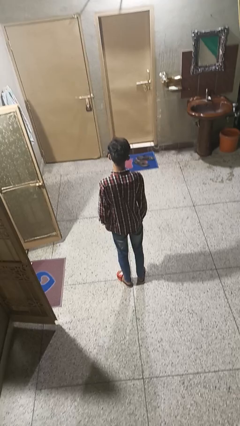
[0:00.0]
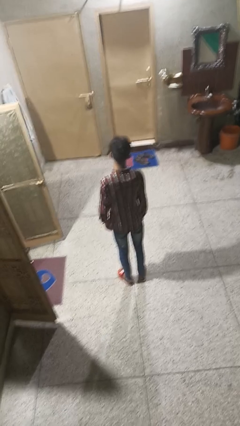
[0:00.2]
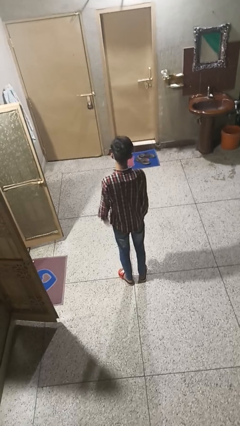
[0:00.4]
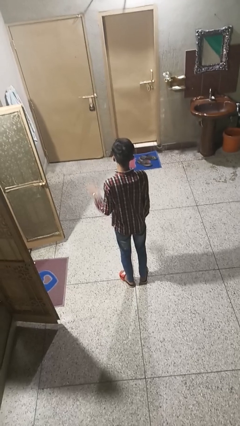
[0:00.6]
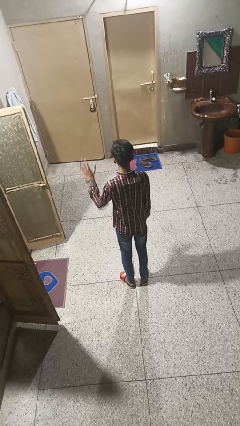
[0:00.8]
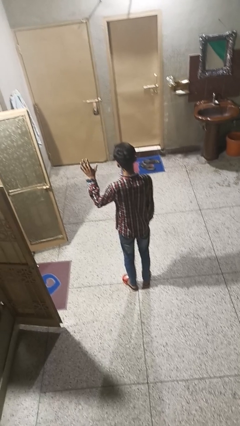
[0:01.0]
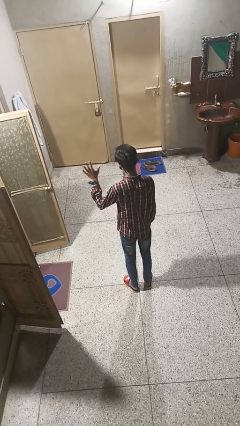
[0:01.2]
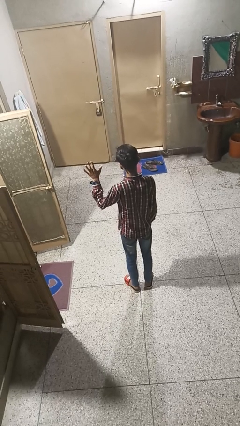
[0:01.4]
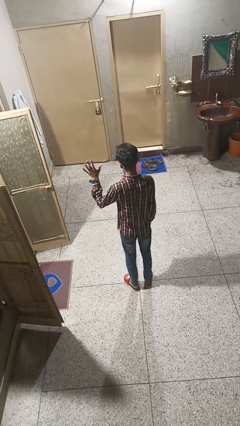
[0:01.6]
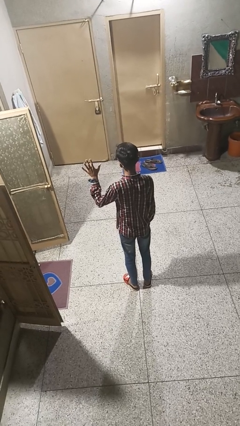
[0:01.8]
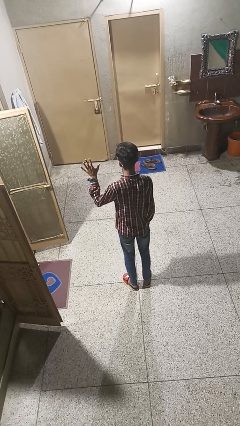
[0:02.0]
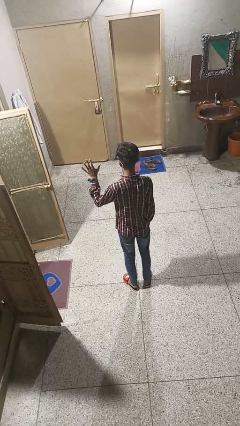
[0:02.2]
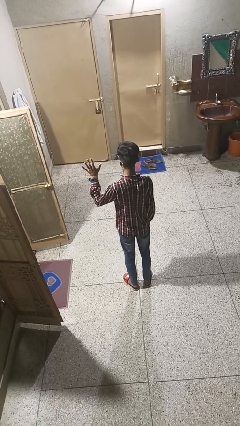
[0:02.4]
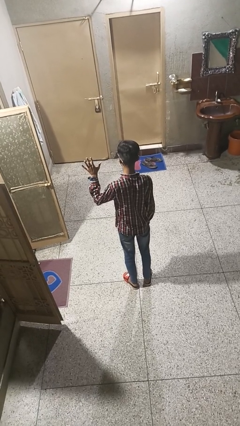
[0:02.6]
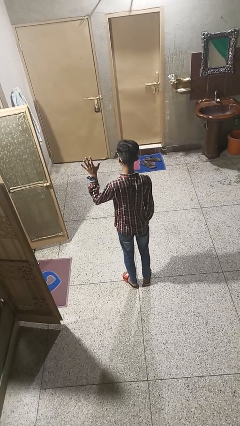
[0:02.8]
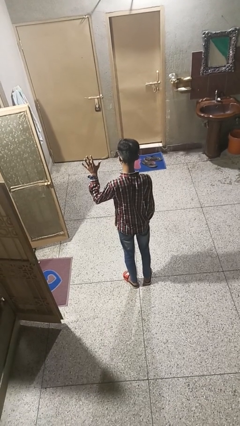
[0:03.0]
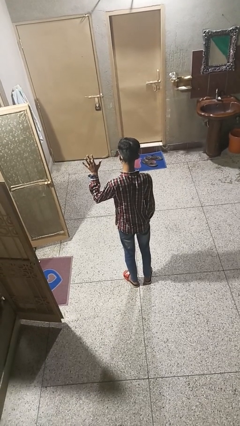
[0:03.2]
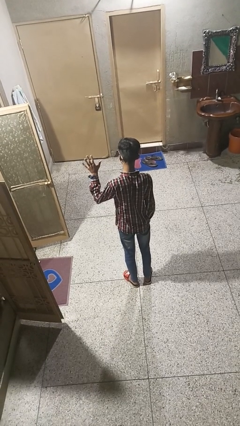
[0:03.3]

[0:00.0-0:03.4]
person gestures number five

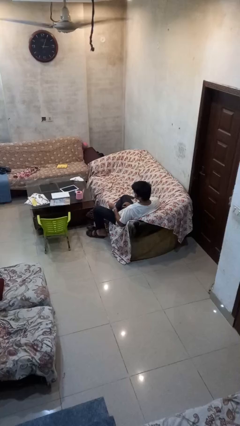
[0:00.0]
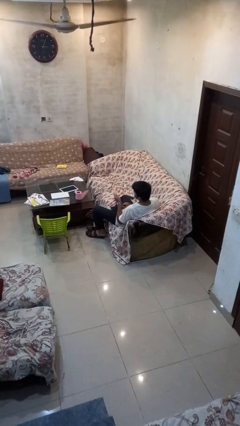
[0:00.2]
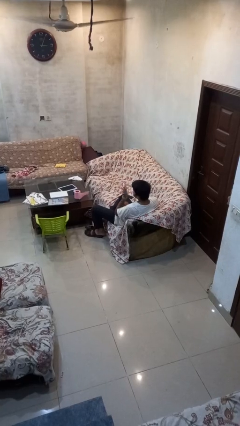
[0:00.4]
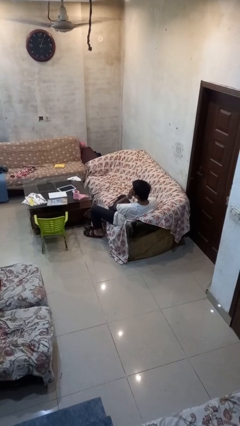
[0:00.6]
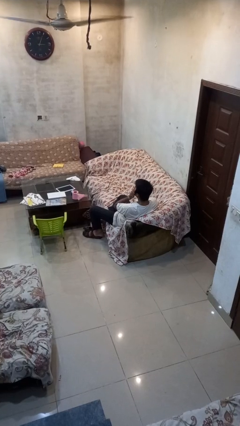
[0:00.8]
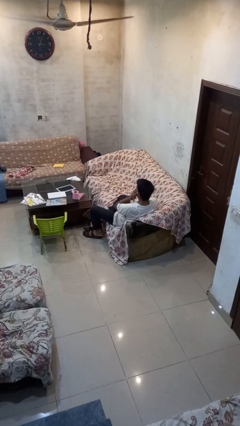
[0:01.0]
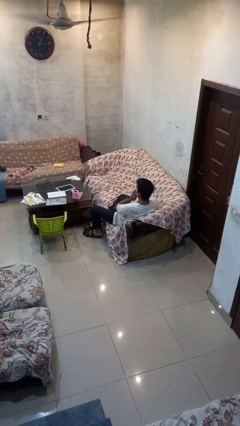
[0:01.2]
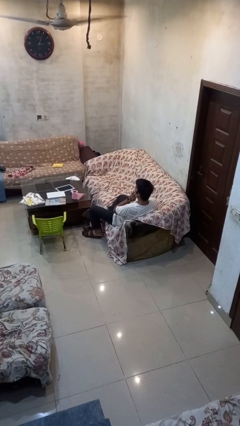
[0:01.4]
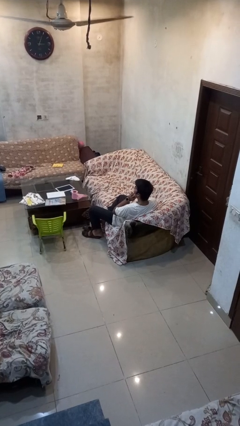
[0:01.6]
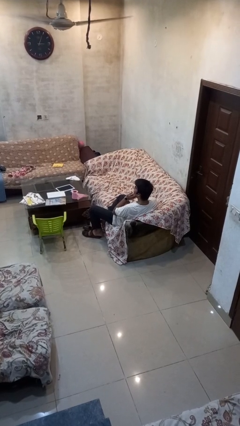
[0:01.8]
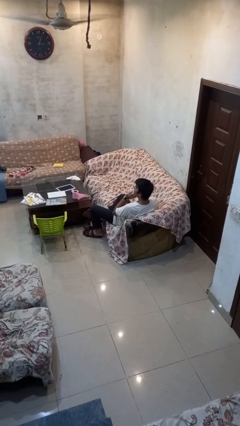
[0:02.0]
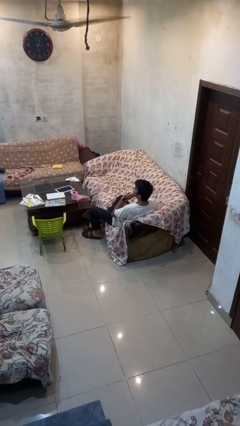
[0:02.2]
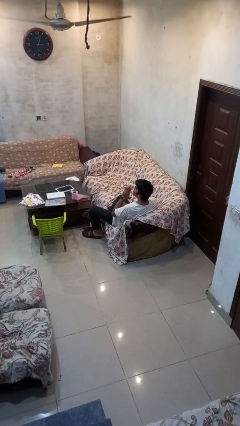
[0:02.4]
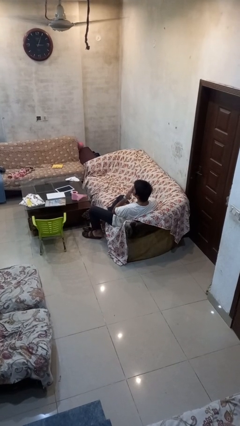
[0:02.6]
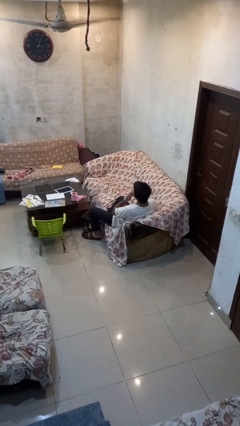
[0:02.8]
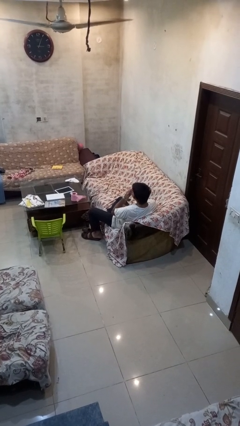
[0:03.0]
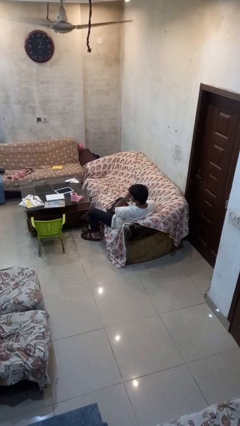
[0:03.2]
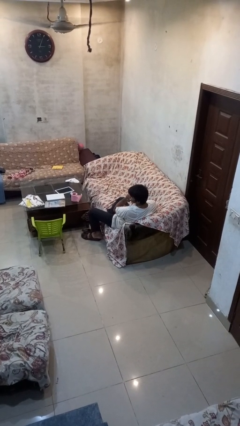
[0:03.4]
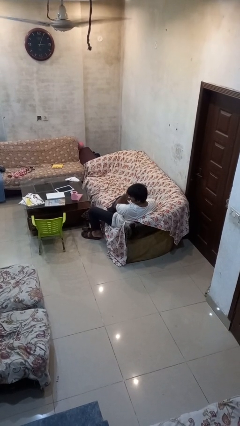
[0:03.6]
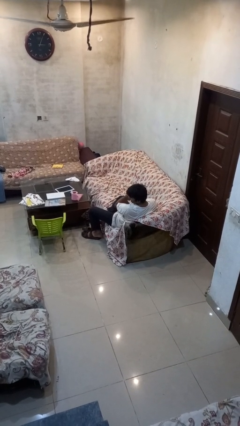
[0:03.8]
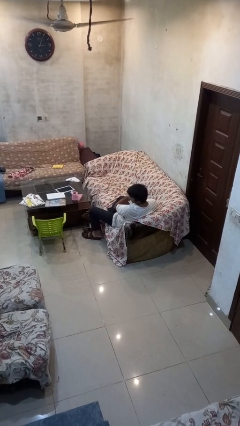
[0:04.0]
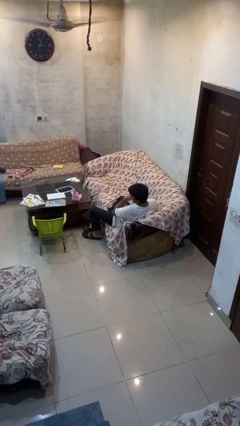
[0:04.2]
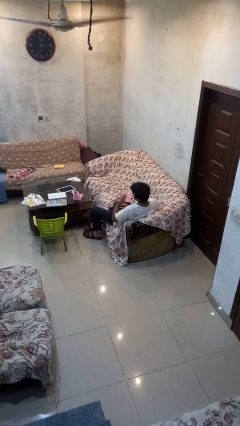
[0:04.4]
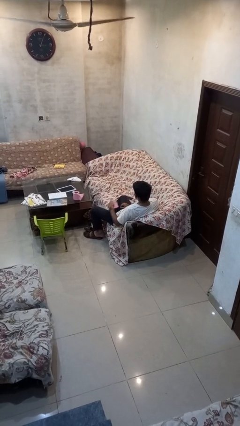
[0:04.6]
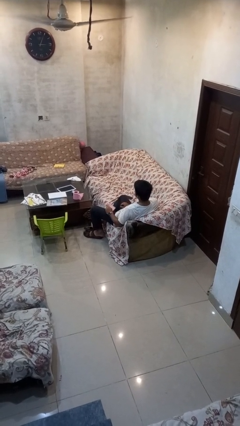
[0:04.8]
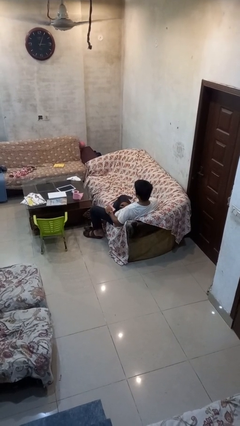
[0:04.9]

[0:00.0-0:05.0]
person wipes mouth with napkin

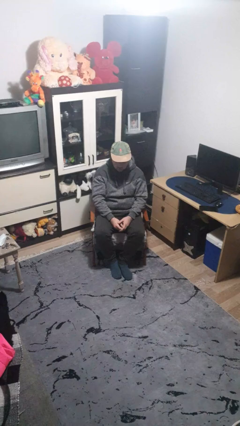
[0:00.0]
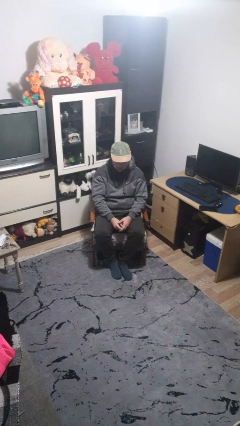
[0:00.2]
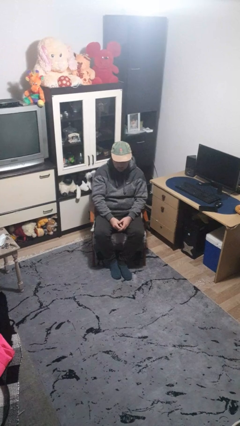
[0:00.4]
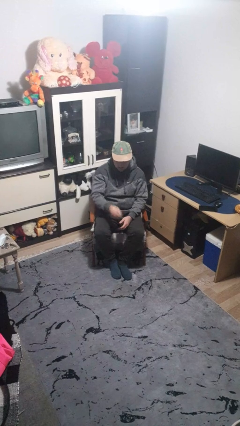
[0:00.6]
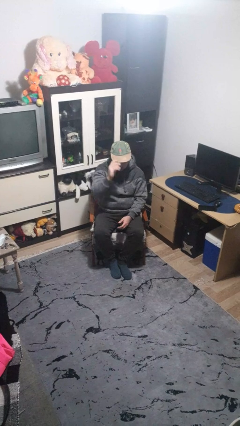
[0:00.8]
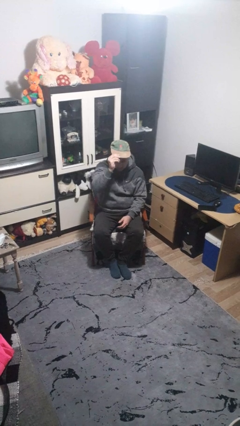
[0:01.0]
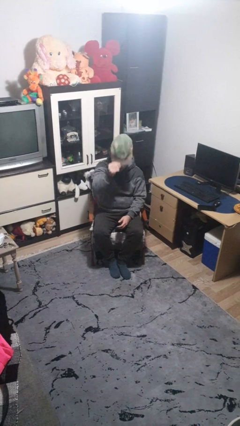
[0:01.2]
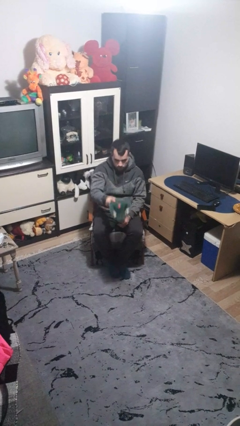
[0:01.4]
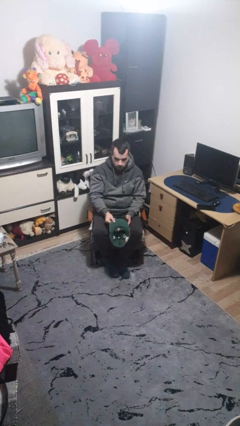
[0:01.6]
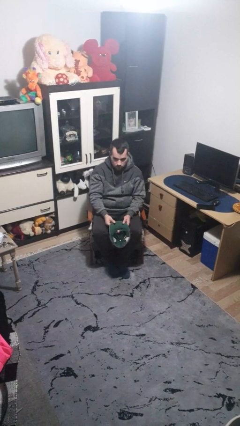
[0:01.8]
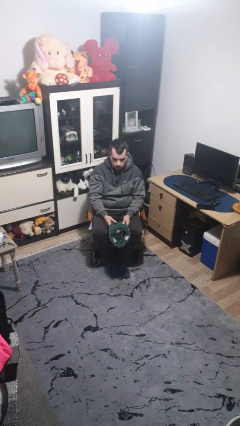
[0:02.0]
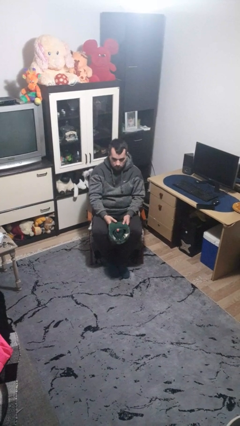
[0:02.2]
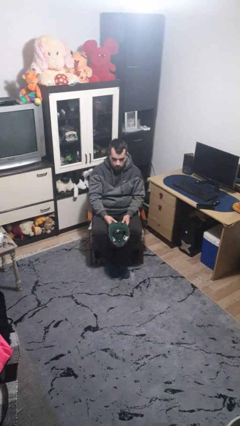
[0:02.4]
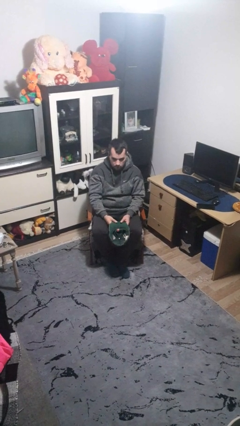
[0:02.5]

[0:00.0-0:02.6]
person takes off hat

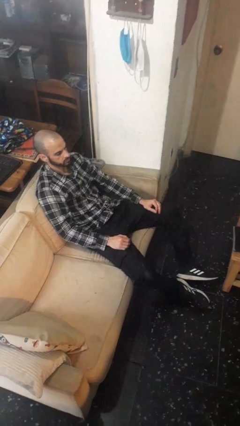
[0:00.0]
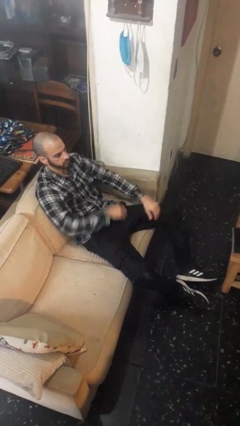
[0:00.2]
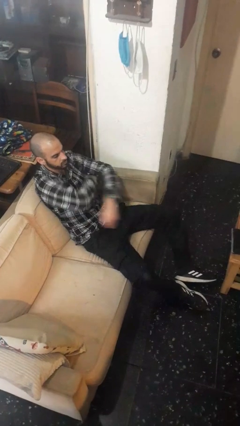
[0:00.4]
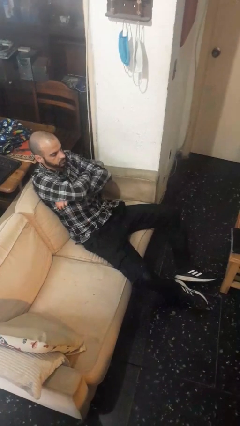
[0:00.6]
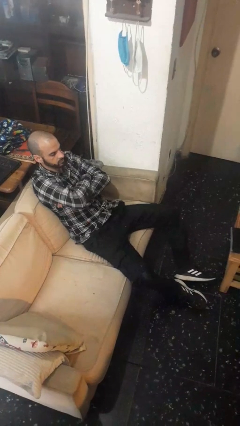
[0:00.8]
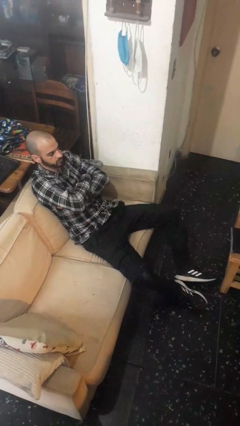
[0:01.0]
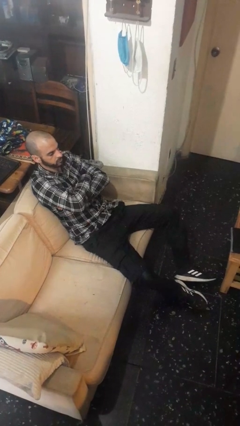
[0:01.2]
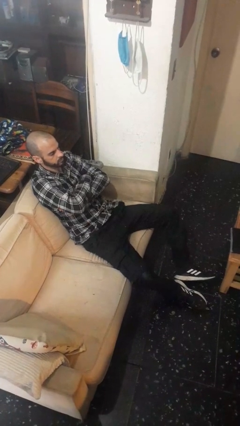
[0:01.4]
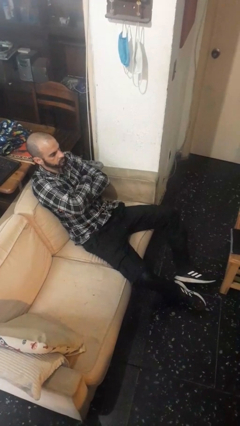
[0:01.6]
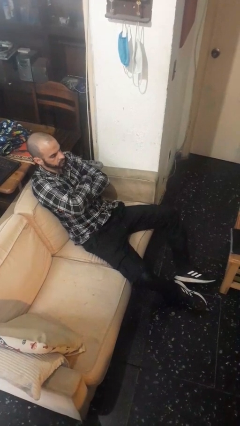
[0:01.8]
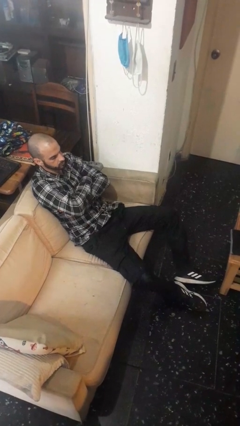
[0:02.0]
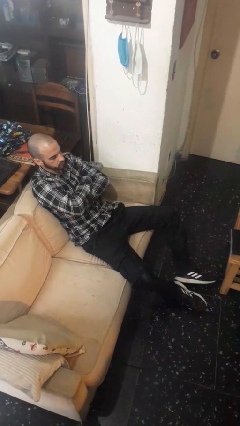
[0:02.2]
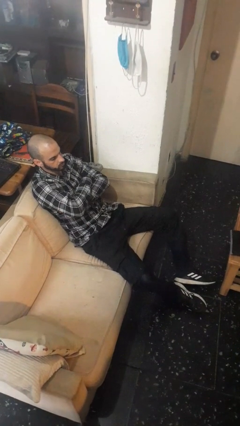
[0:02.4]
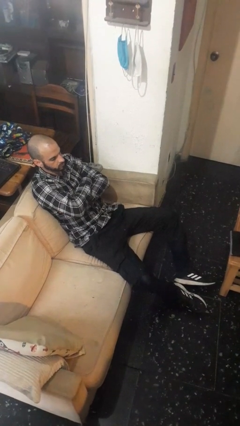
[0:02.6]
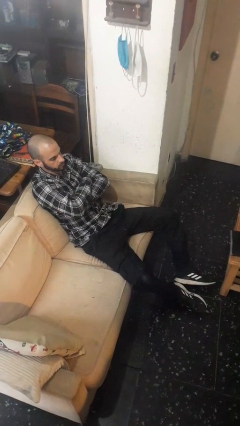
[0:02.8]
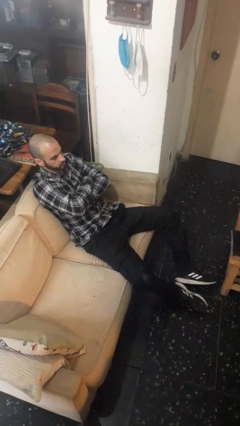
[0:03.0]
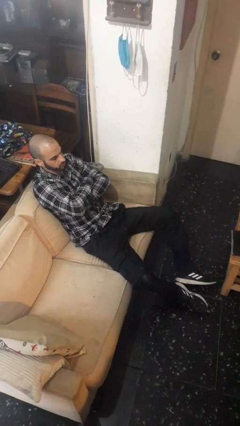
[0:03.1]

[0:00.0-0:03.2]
person crosses arms

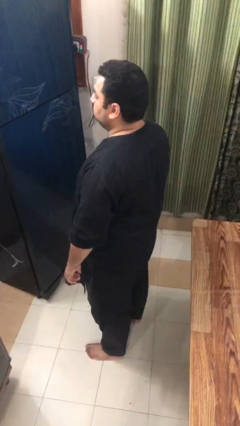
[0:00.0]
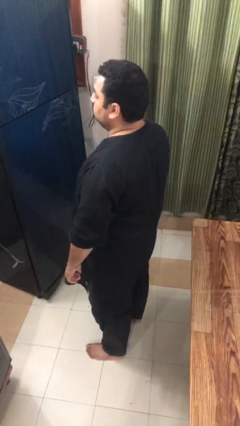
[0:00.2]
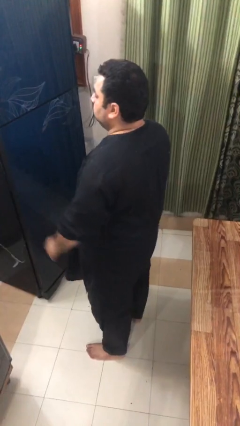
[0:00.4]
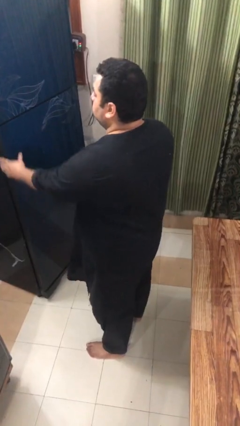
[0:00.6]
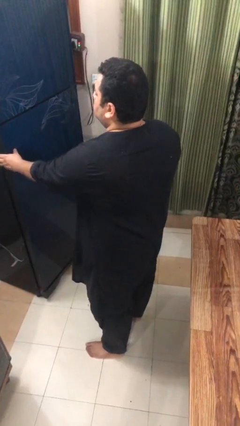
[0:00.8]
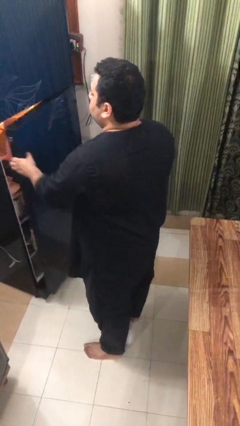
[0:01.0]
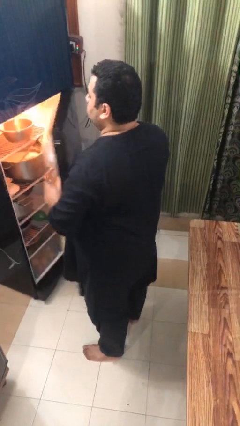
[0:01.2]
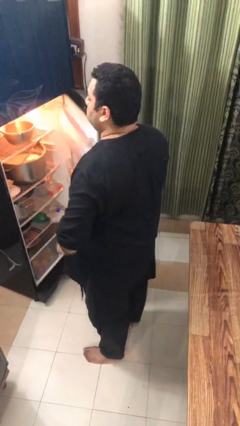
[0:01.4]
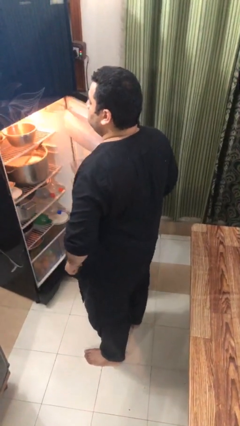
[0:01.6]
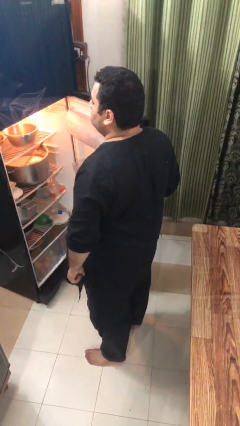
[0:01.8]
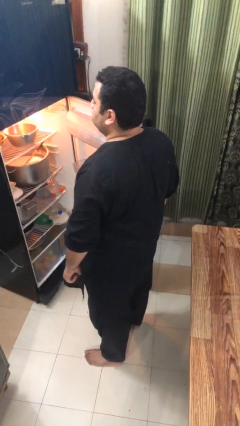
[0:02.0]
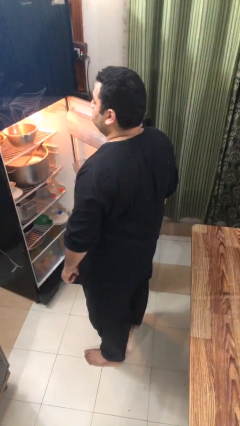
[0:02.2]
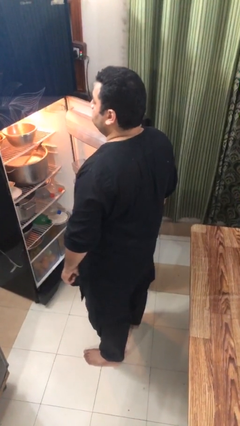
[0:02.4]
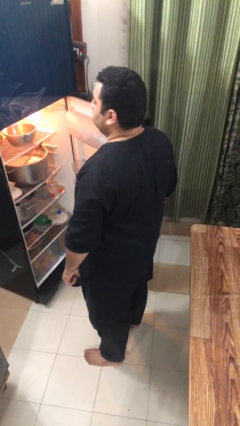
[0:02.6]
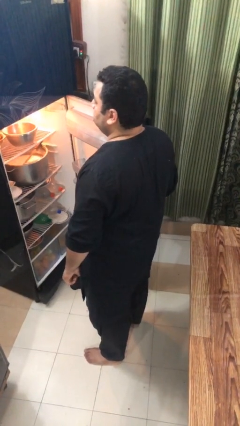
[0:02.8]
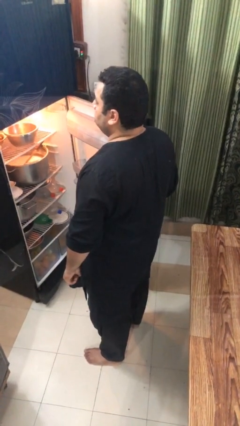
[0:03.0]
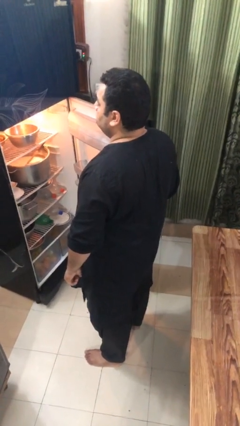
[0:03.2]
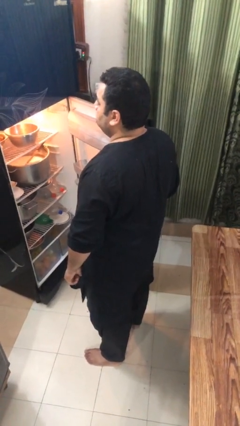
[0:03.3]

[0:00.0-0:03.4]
person opens refrigerator
